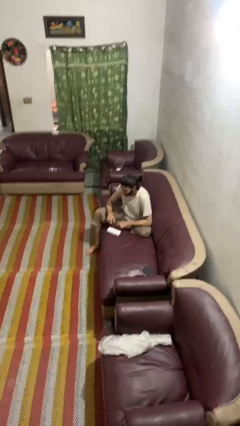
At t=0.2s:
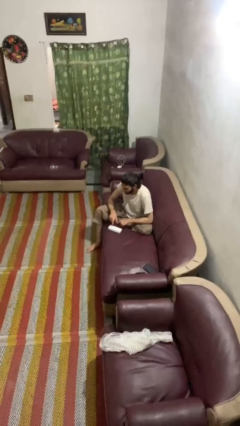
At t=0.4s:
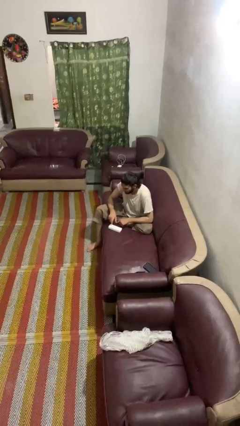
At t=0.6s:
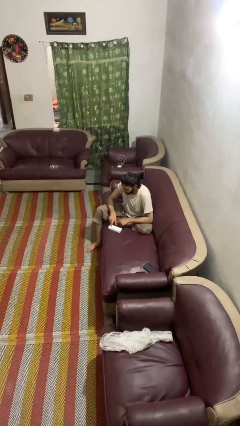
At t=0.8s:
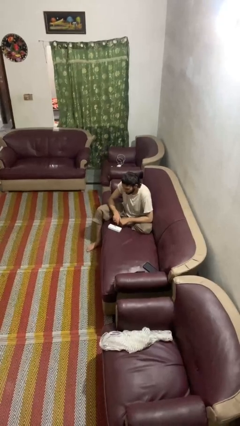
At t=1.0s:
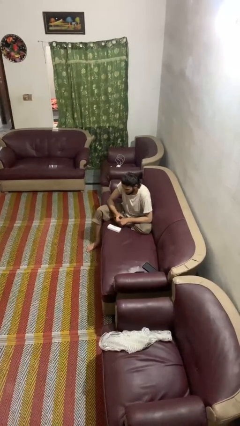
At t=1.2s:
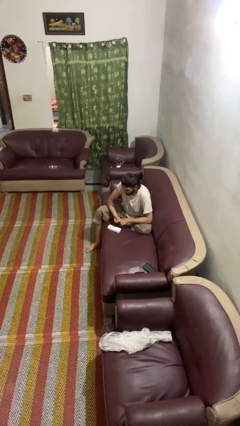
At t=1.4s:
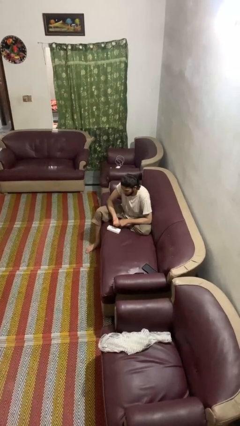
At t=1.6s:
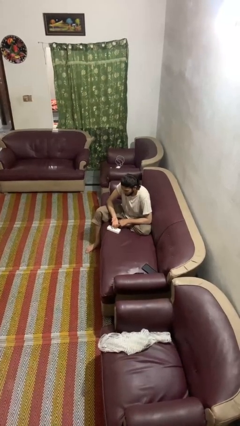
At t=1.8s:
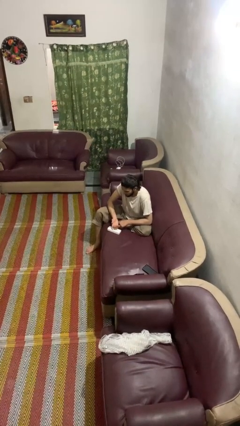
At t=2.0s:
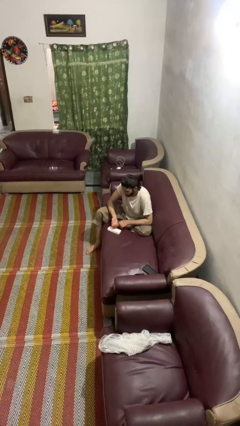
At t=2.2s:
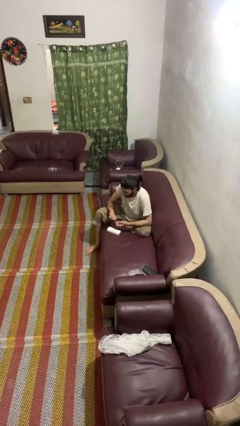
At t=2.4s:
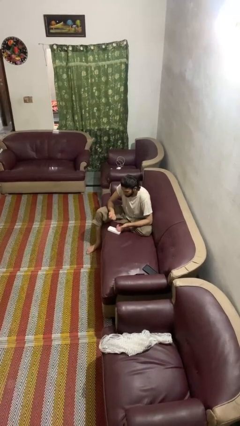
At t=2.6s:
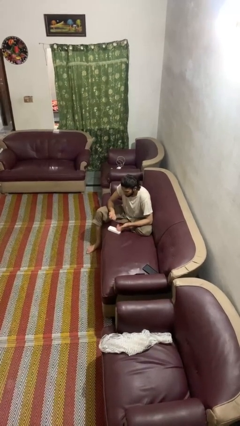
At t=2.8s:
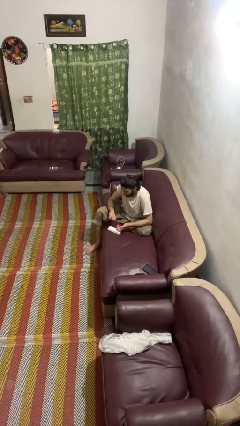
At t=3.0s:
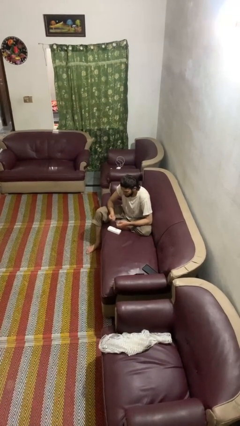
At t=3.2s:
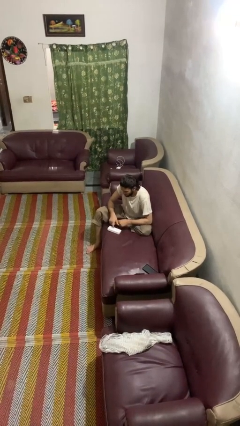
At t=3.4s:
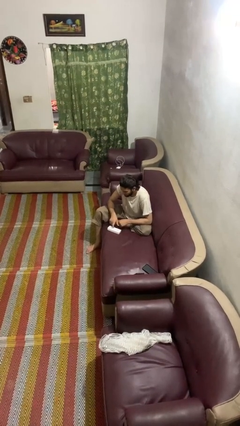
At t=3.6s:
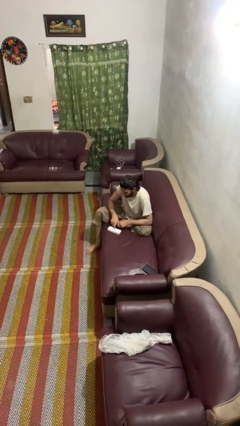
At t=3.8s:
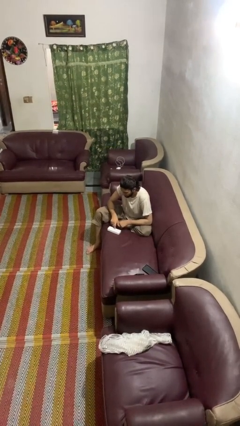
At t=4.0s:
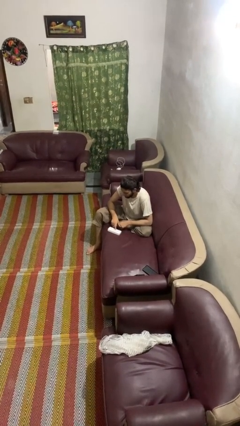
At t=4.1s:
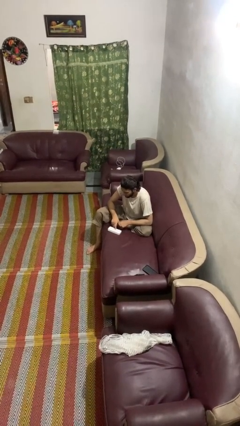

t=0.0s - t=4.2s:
person taps object with finger

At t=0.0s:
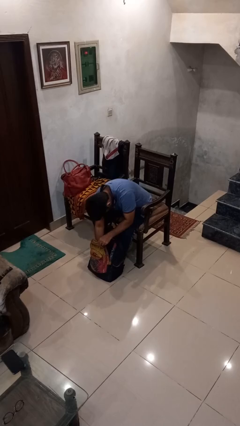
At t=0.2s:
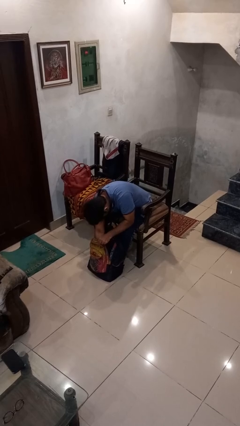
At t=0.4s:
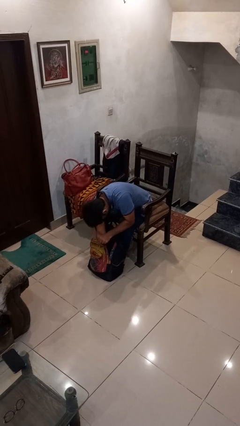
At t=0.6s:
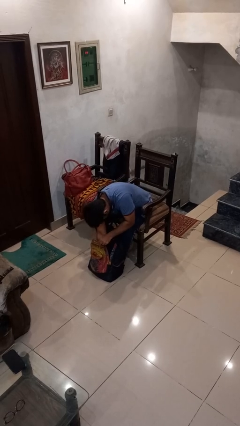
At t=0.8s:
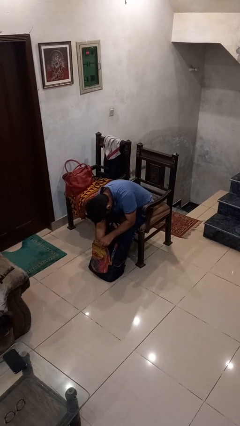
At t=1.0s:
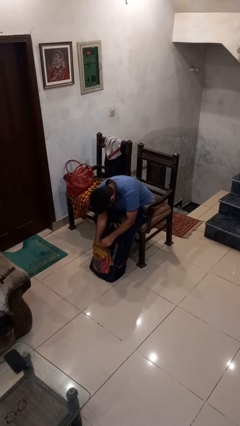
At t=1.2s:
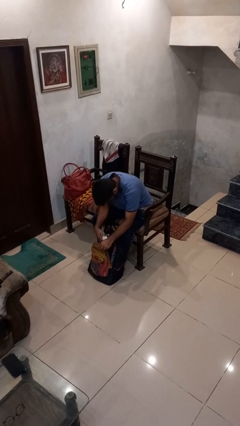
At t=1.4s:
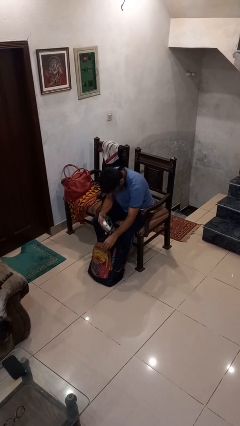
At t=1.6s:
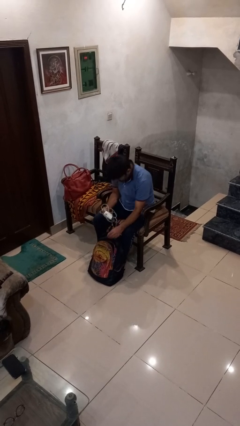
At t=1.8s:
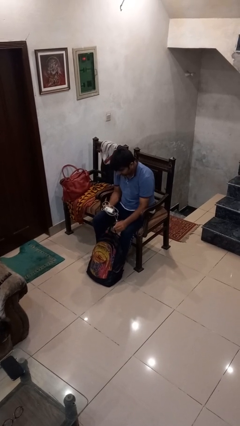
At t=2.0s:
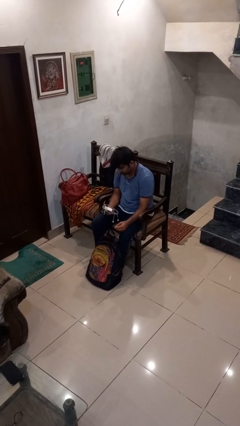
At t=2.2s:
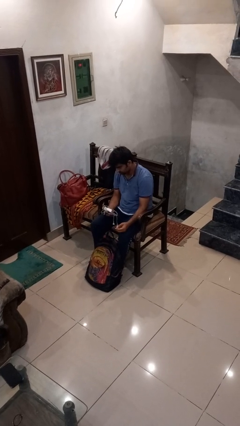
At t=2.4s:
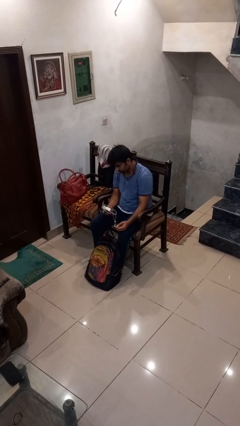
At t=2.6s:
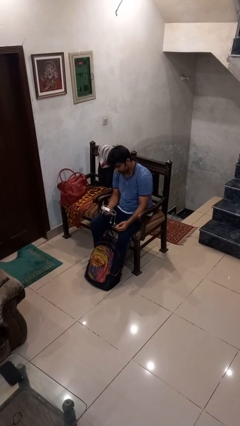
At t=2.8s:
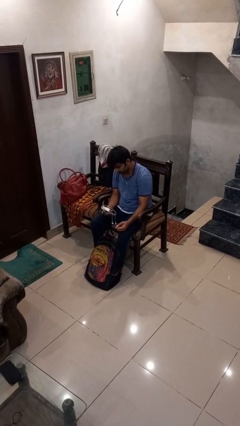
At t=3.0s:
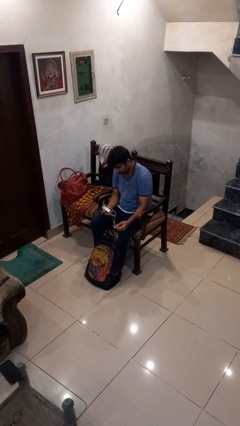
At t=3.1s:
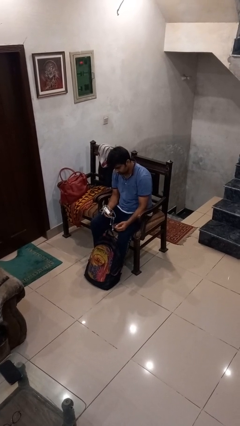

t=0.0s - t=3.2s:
person takes object from backpack

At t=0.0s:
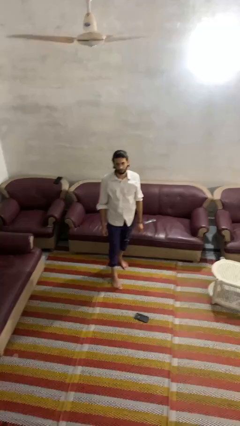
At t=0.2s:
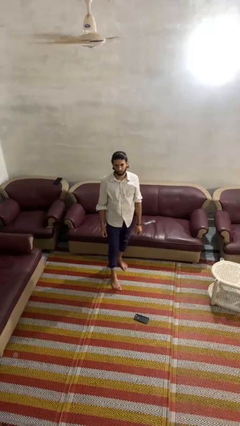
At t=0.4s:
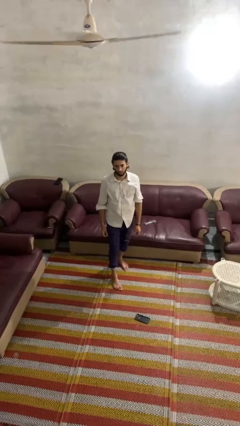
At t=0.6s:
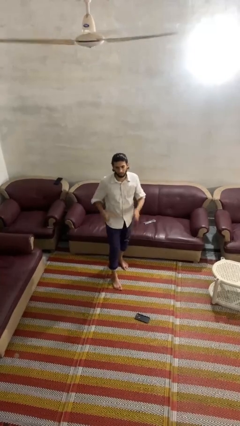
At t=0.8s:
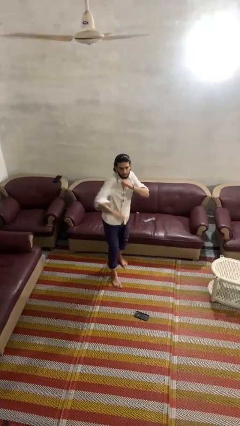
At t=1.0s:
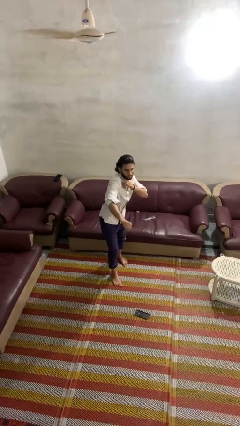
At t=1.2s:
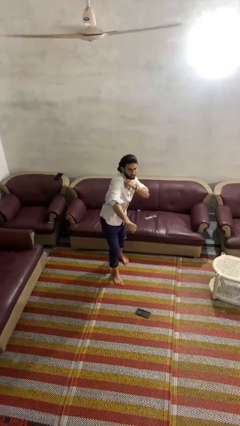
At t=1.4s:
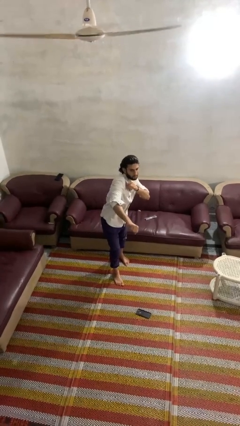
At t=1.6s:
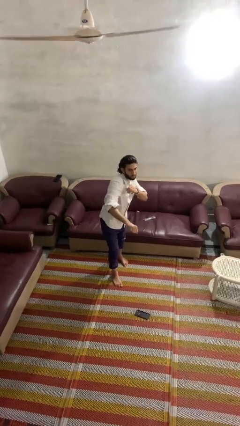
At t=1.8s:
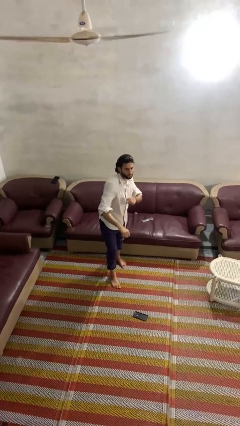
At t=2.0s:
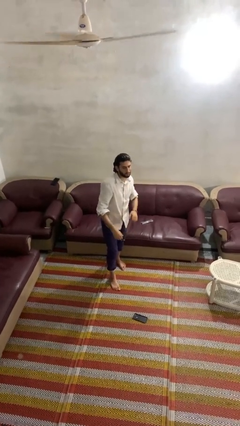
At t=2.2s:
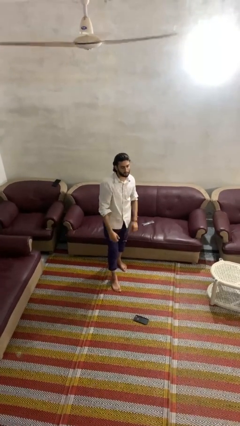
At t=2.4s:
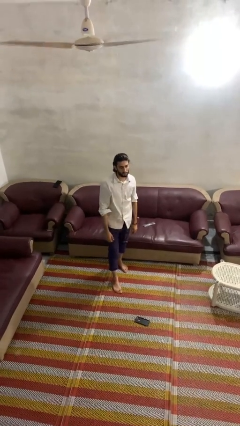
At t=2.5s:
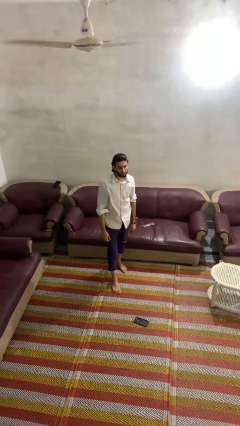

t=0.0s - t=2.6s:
person punches

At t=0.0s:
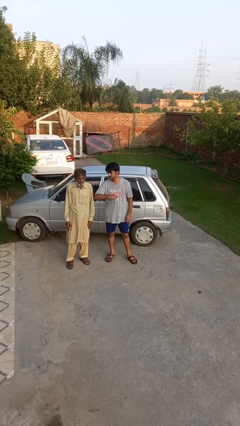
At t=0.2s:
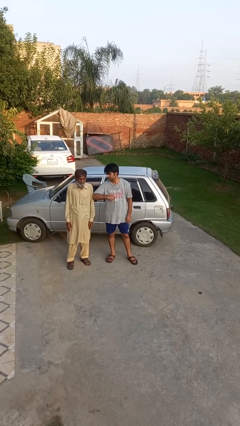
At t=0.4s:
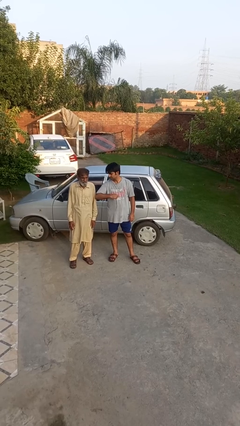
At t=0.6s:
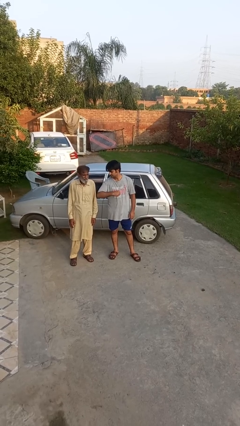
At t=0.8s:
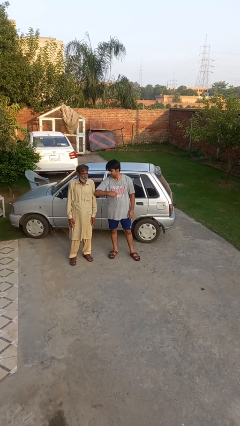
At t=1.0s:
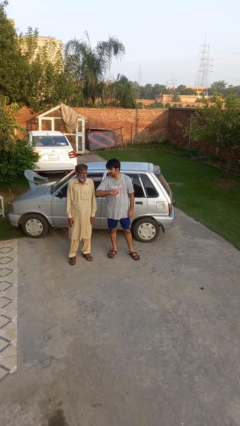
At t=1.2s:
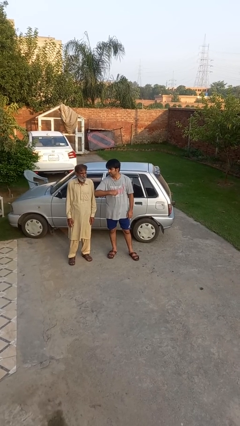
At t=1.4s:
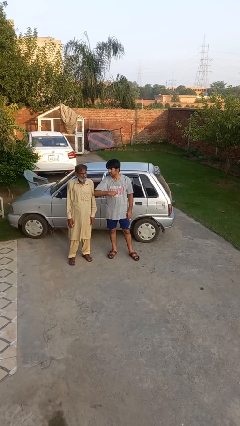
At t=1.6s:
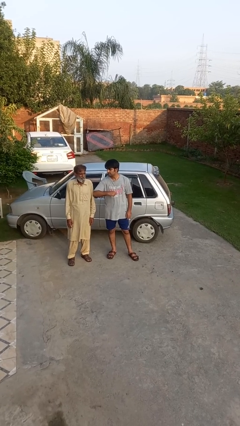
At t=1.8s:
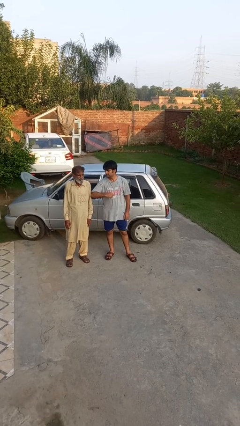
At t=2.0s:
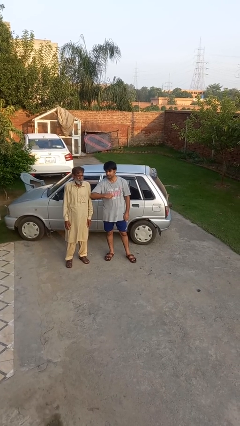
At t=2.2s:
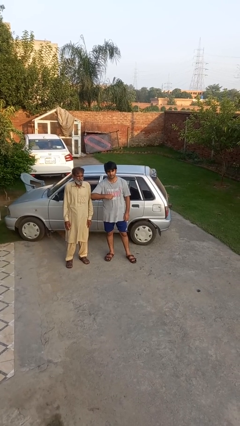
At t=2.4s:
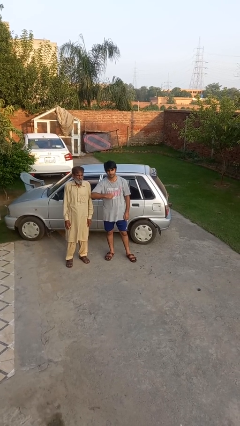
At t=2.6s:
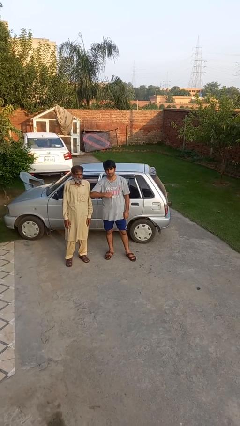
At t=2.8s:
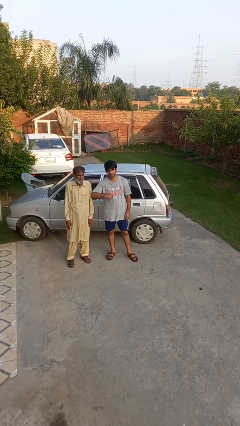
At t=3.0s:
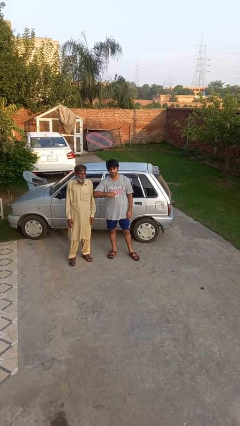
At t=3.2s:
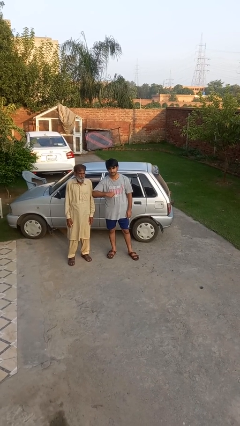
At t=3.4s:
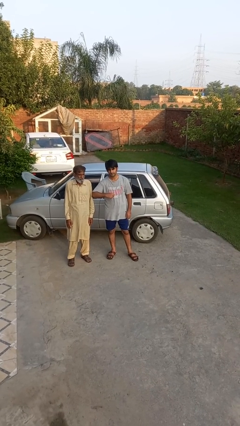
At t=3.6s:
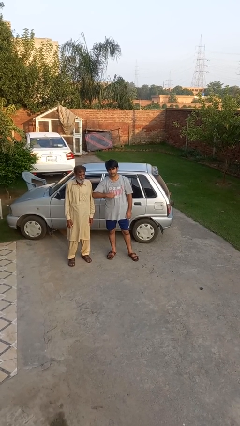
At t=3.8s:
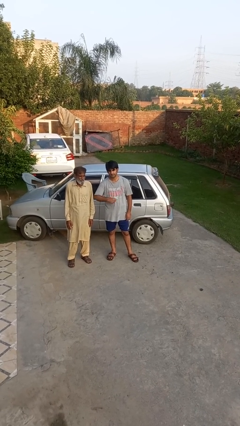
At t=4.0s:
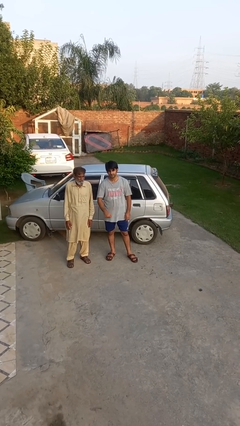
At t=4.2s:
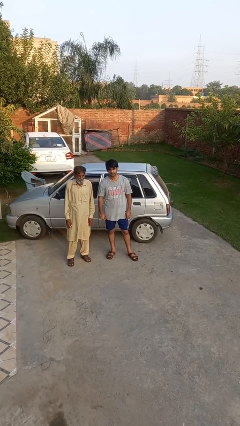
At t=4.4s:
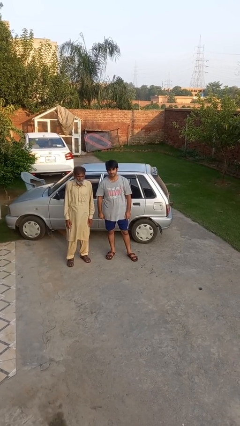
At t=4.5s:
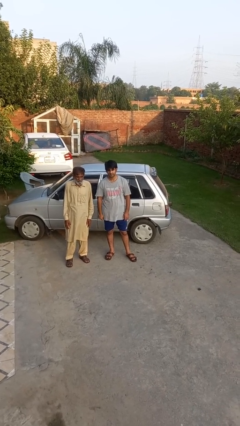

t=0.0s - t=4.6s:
person nudges person with elbow

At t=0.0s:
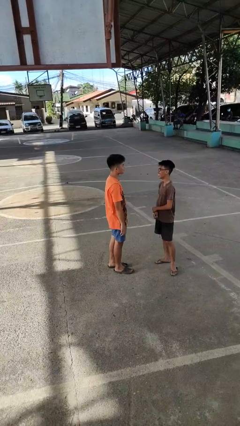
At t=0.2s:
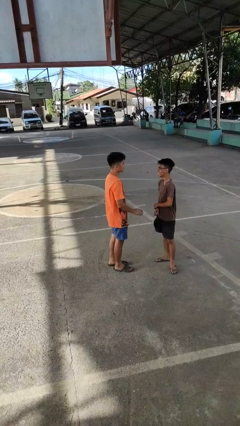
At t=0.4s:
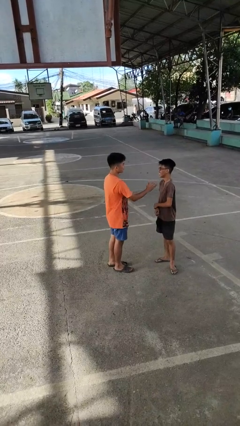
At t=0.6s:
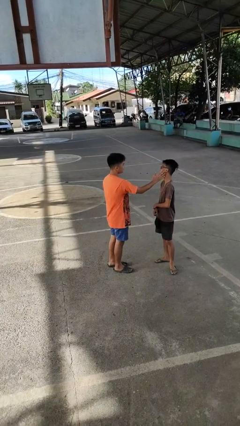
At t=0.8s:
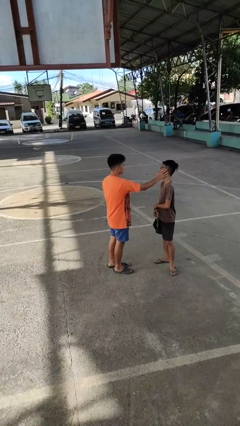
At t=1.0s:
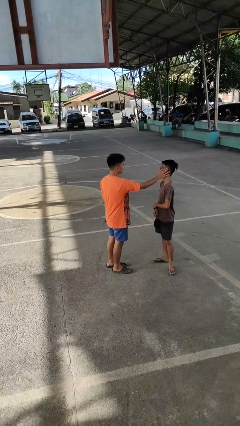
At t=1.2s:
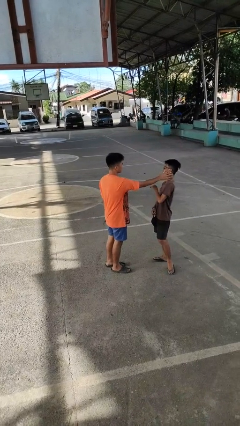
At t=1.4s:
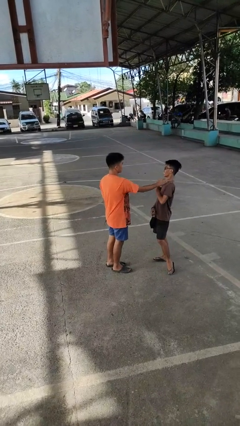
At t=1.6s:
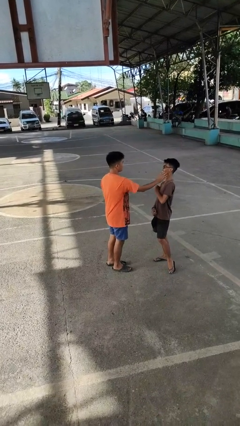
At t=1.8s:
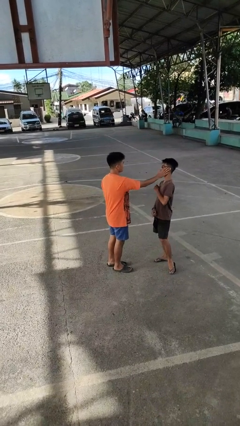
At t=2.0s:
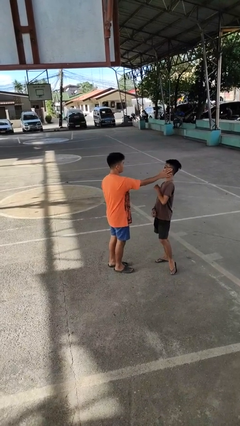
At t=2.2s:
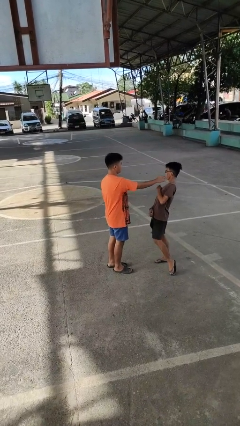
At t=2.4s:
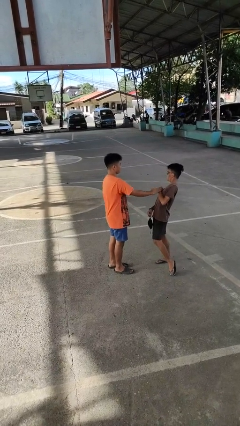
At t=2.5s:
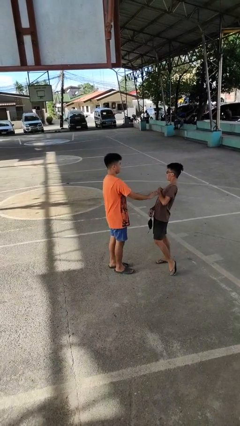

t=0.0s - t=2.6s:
person touches face of person
